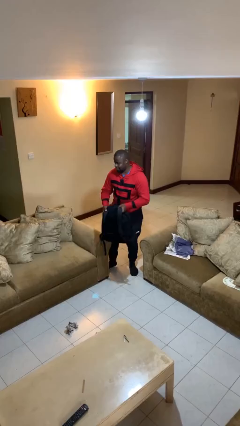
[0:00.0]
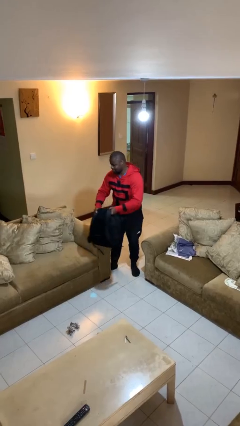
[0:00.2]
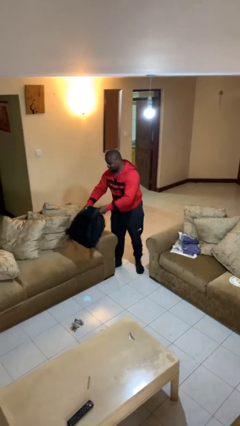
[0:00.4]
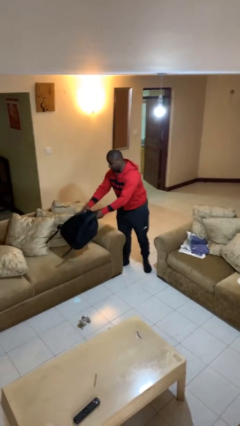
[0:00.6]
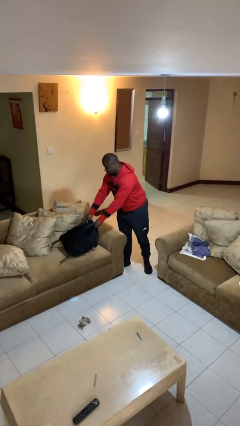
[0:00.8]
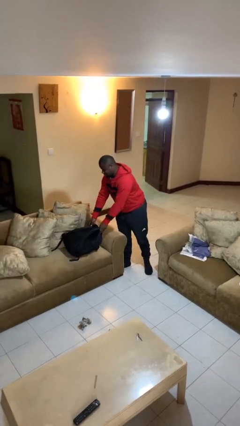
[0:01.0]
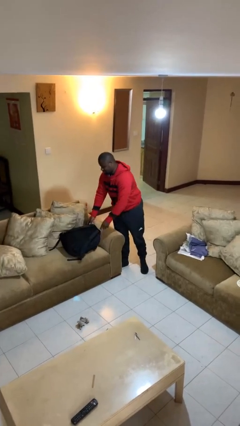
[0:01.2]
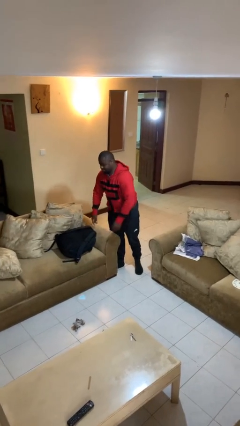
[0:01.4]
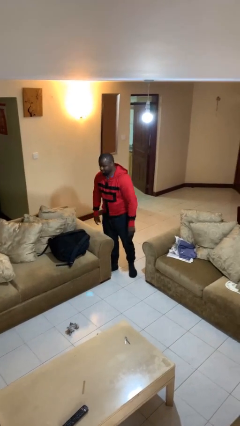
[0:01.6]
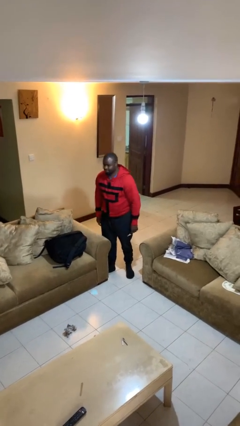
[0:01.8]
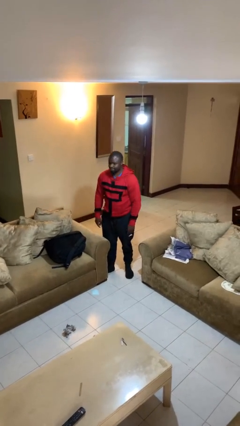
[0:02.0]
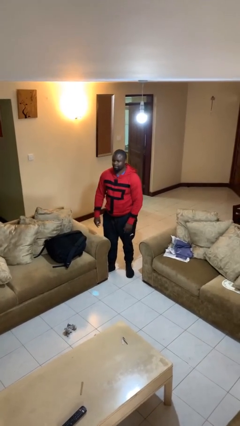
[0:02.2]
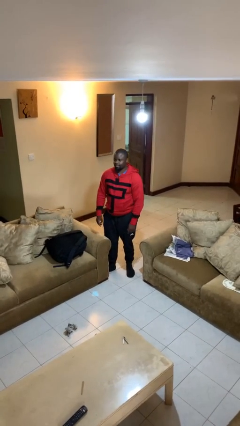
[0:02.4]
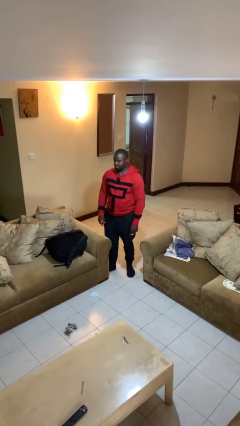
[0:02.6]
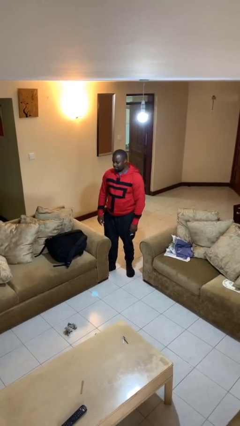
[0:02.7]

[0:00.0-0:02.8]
person puts down object on couch

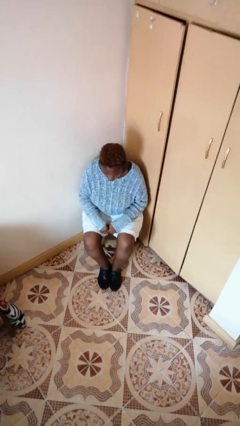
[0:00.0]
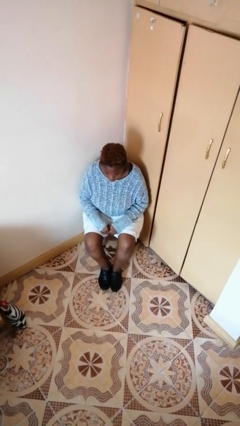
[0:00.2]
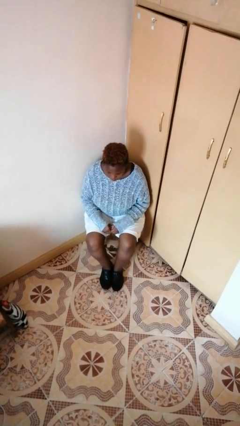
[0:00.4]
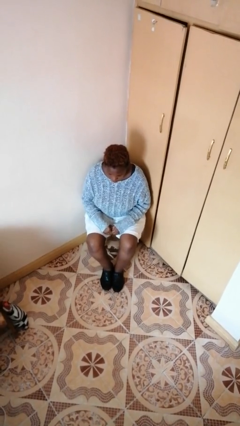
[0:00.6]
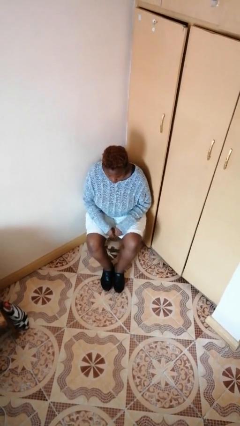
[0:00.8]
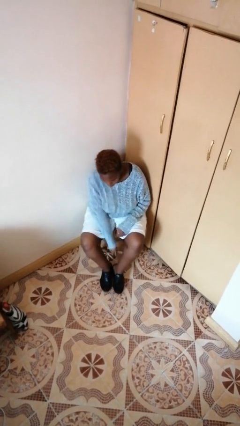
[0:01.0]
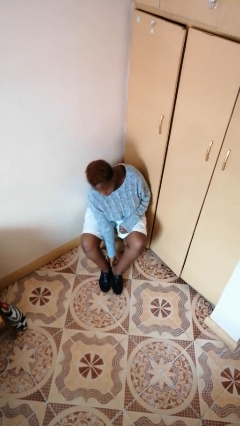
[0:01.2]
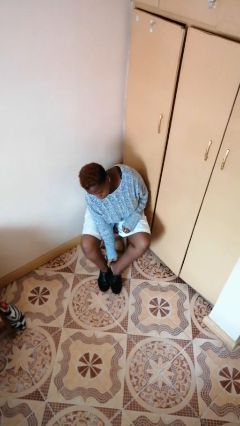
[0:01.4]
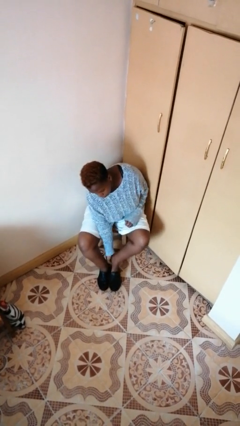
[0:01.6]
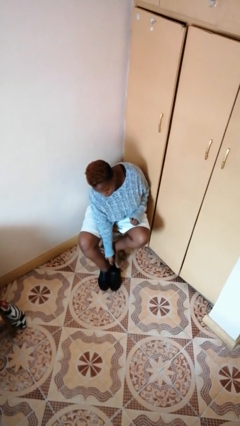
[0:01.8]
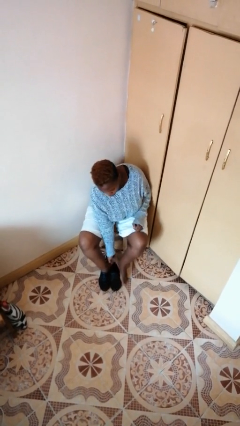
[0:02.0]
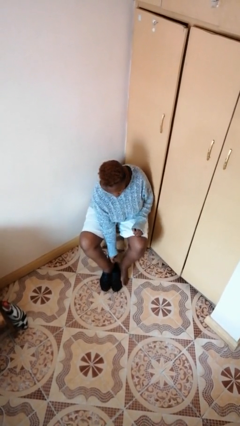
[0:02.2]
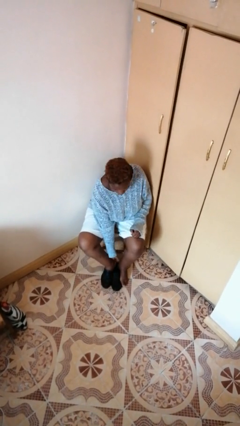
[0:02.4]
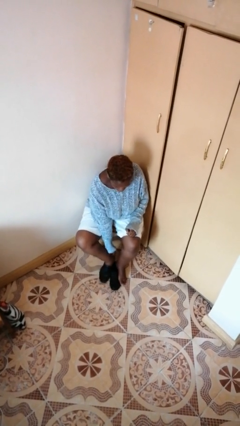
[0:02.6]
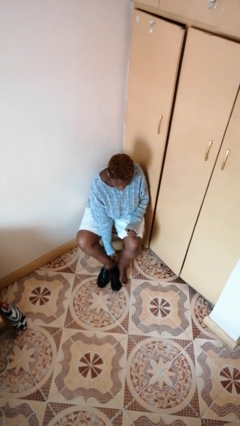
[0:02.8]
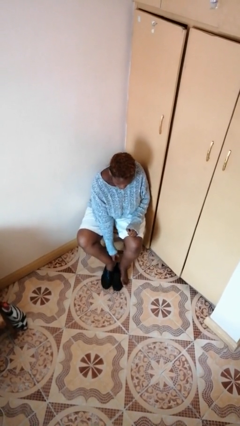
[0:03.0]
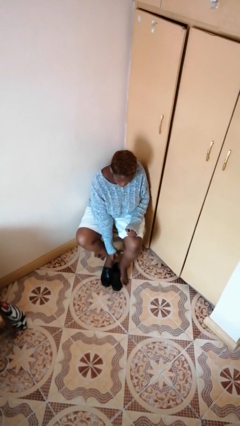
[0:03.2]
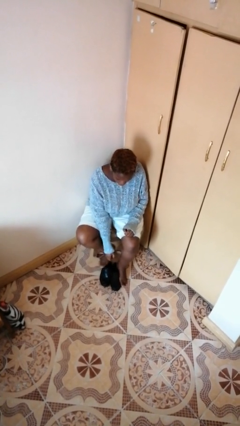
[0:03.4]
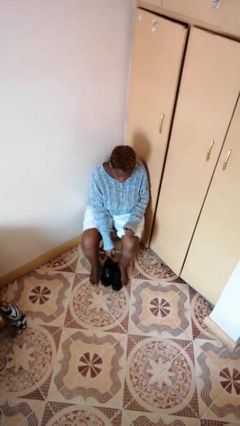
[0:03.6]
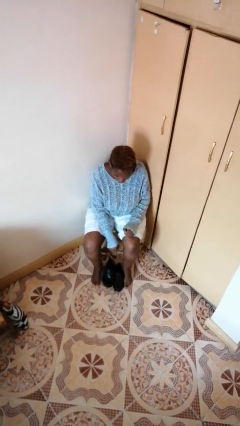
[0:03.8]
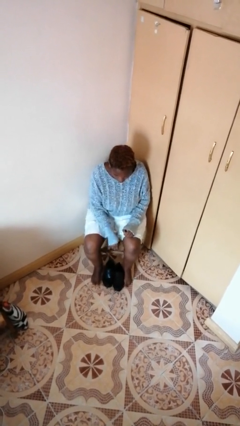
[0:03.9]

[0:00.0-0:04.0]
person takes off shoes

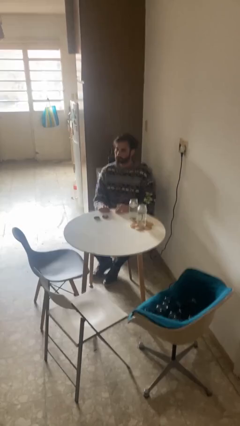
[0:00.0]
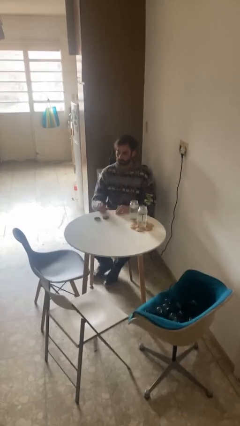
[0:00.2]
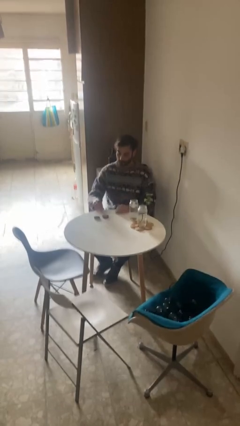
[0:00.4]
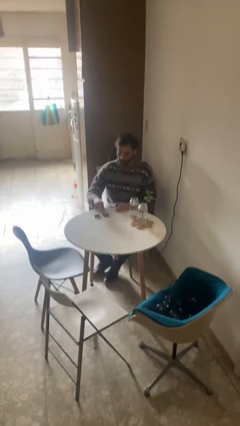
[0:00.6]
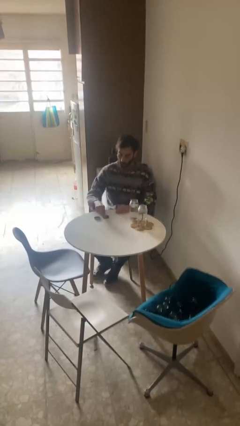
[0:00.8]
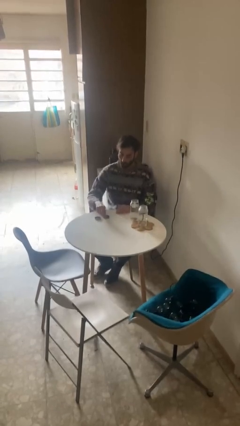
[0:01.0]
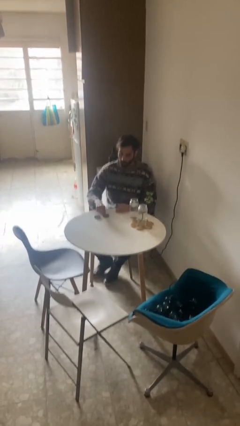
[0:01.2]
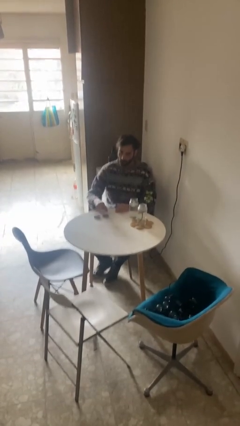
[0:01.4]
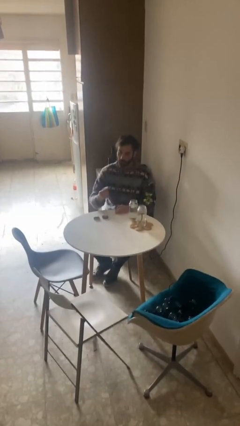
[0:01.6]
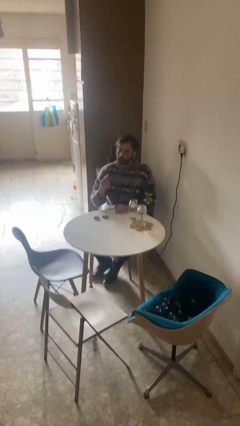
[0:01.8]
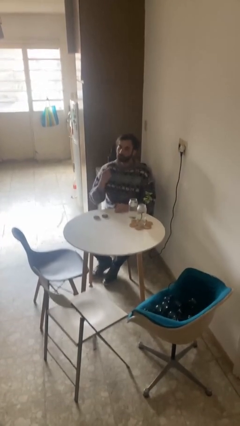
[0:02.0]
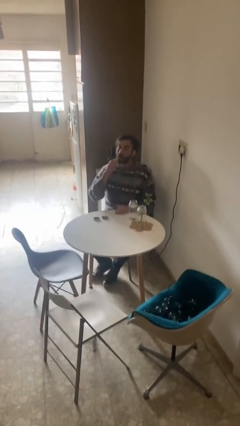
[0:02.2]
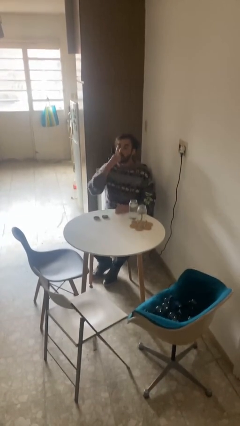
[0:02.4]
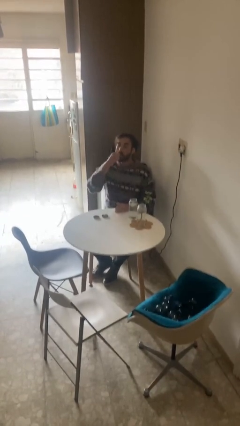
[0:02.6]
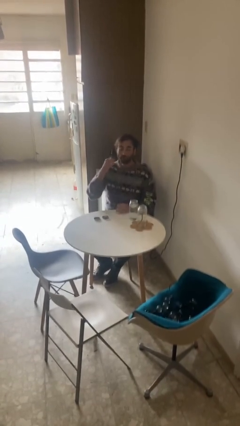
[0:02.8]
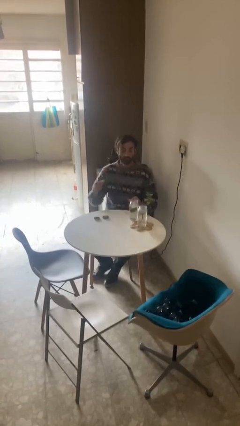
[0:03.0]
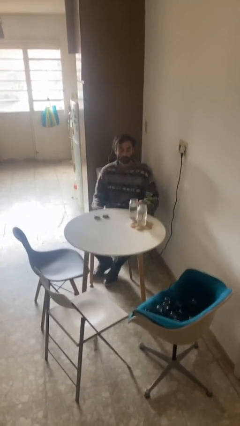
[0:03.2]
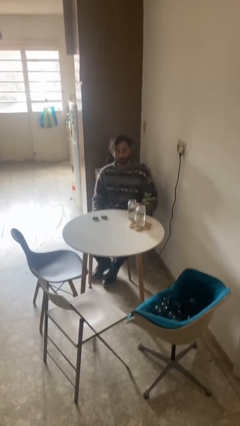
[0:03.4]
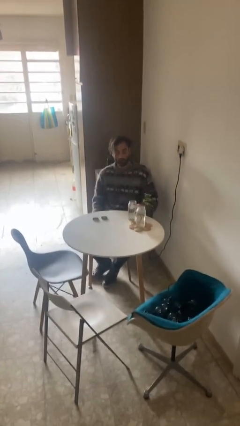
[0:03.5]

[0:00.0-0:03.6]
person takes medicine pills

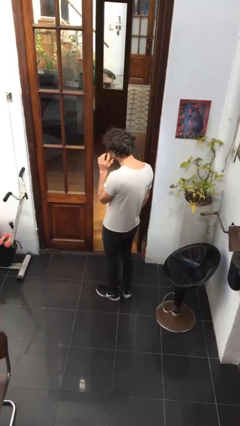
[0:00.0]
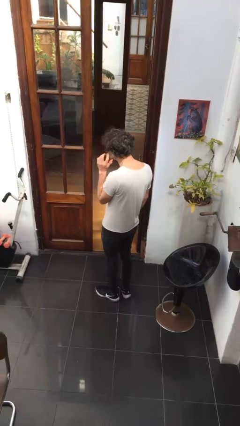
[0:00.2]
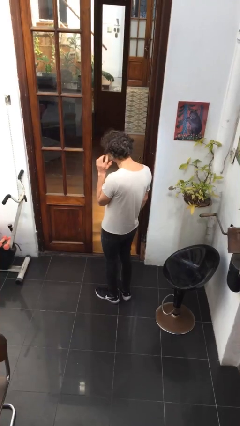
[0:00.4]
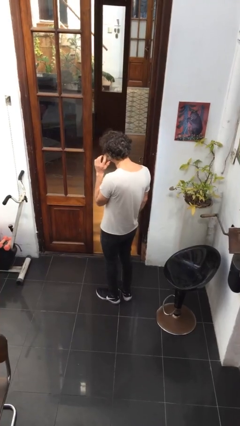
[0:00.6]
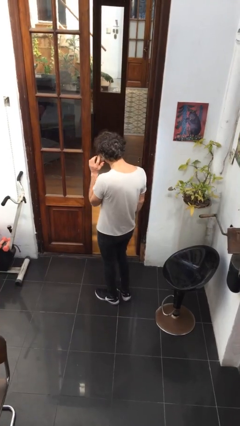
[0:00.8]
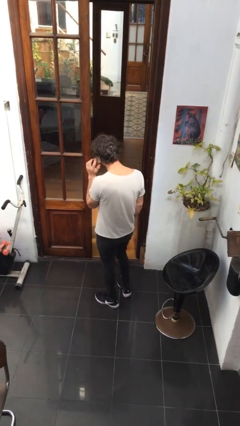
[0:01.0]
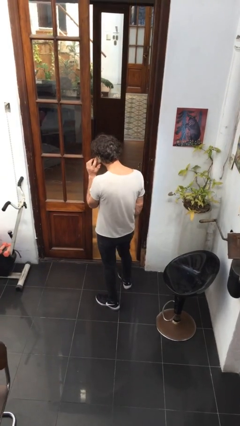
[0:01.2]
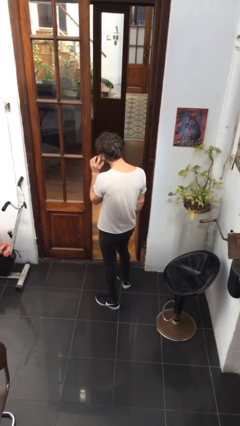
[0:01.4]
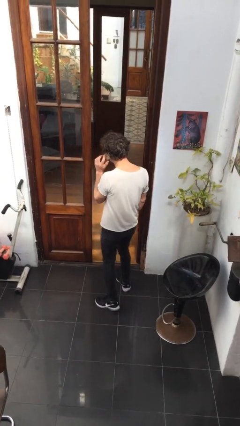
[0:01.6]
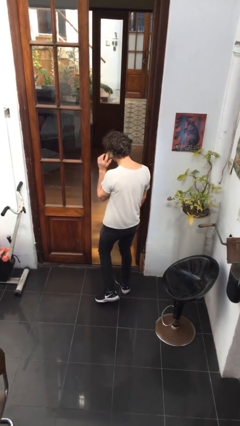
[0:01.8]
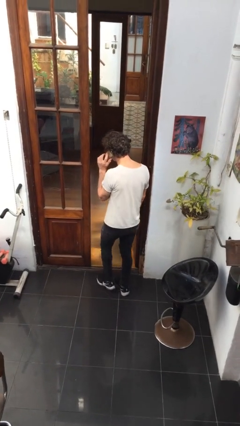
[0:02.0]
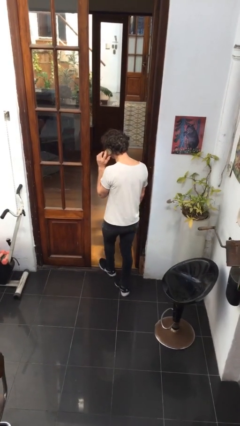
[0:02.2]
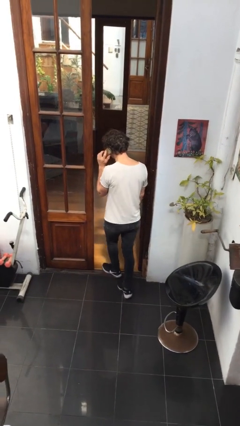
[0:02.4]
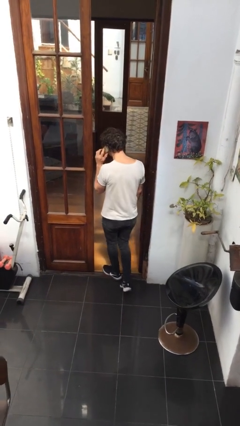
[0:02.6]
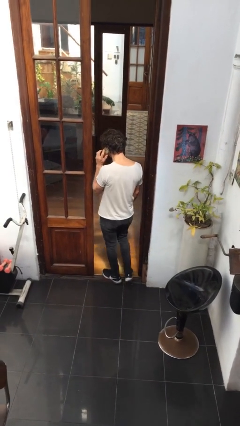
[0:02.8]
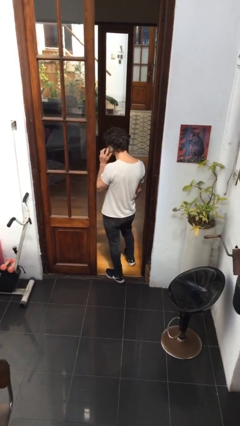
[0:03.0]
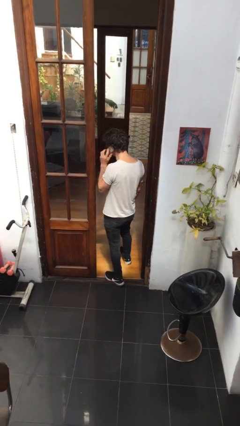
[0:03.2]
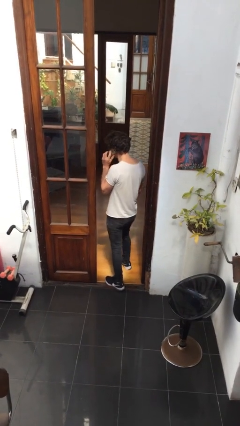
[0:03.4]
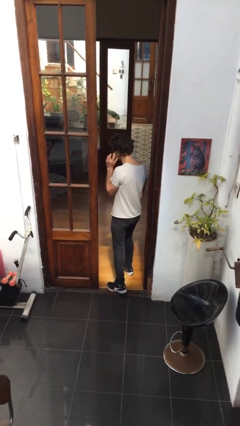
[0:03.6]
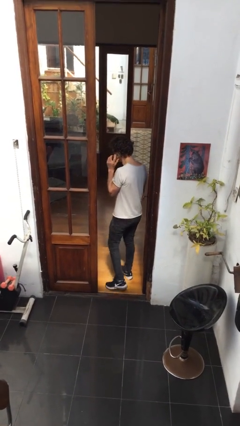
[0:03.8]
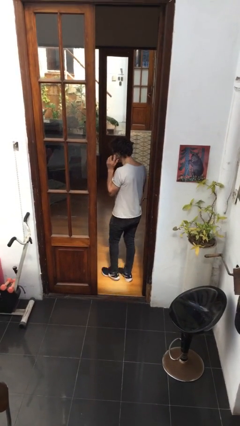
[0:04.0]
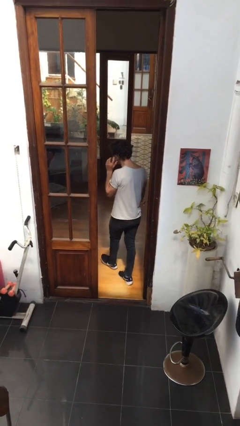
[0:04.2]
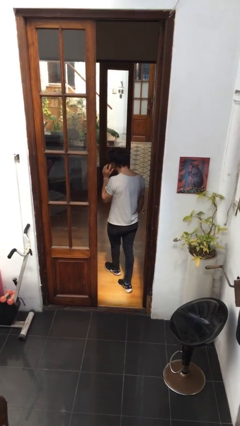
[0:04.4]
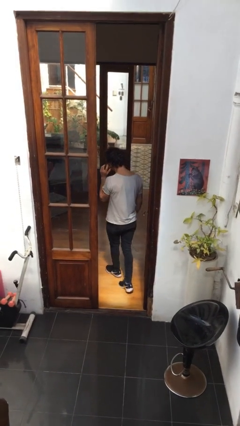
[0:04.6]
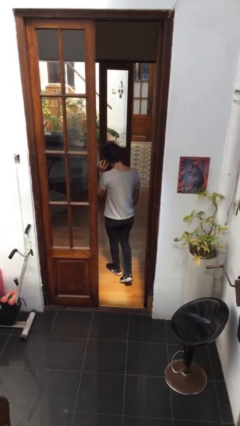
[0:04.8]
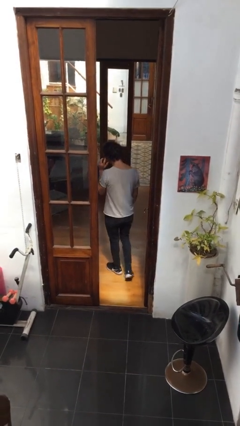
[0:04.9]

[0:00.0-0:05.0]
person exits scene through structure

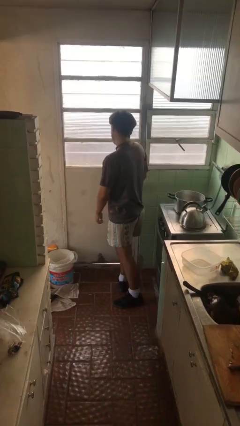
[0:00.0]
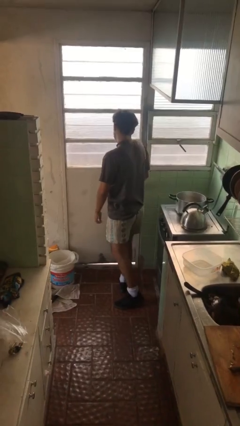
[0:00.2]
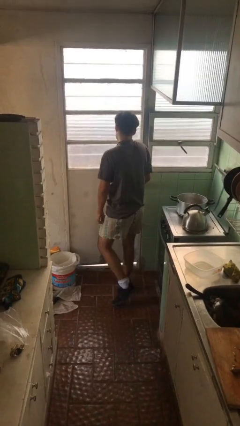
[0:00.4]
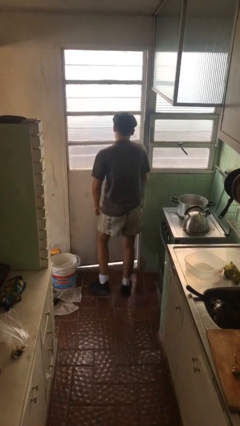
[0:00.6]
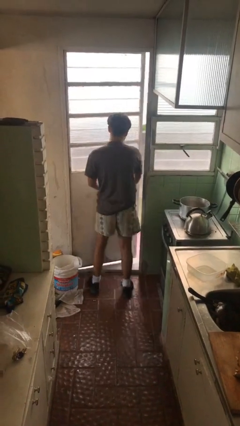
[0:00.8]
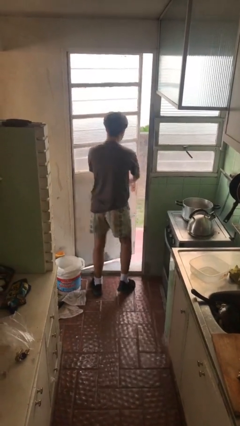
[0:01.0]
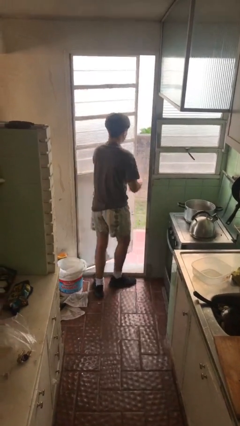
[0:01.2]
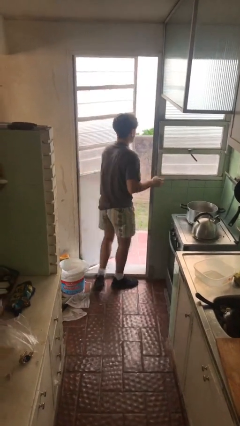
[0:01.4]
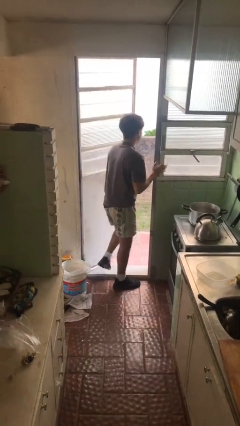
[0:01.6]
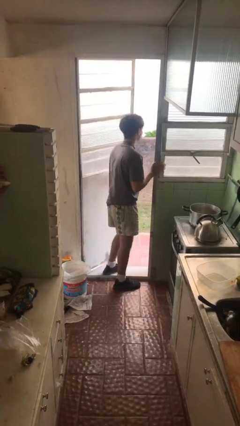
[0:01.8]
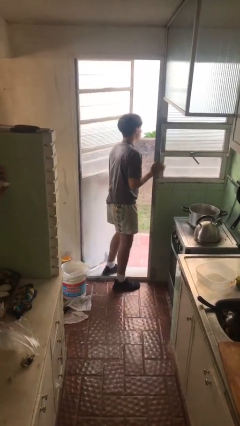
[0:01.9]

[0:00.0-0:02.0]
person opens facility door

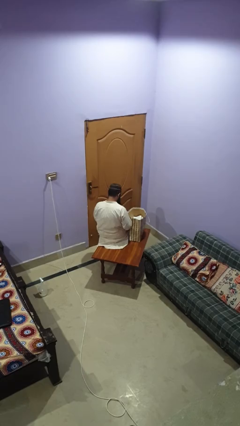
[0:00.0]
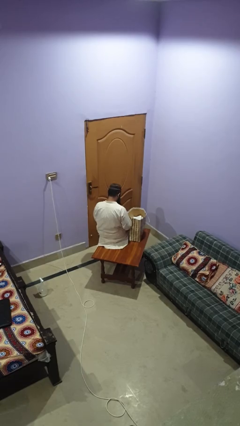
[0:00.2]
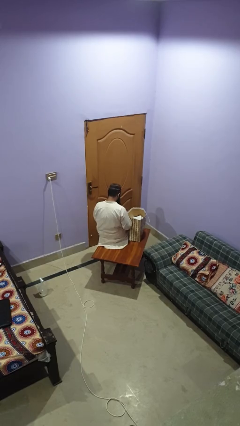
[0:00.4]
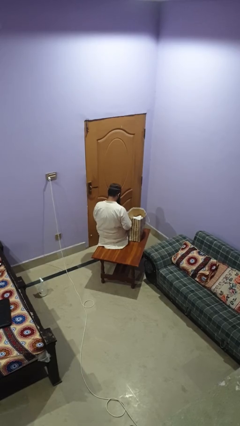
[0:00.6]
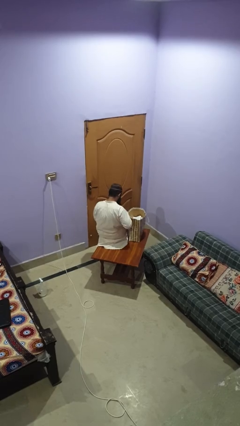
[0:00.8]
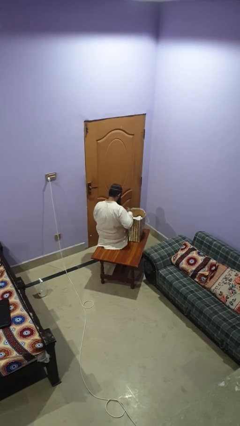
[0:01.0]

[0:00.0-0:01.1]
person searches in bag
